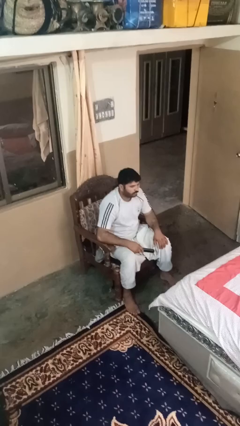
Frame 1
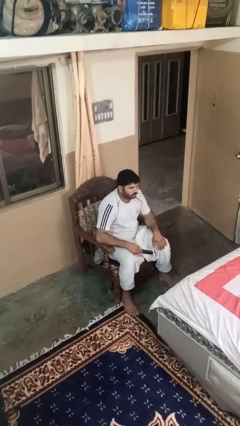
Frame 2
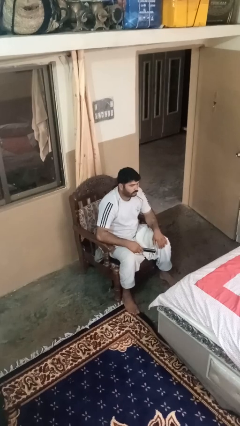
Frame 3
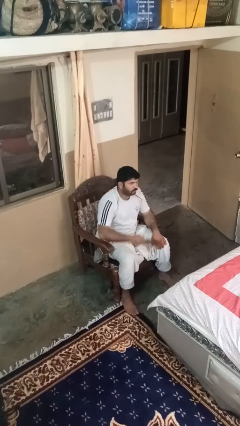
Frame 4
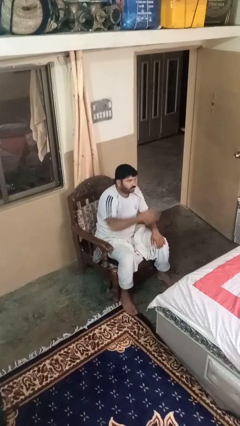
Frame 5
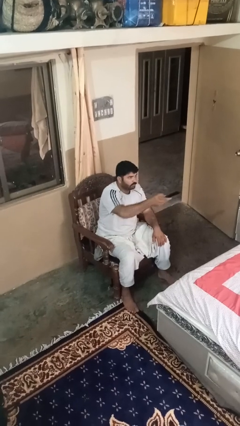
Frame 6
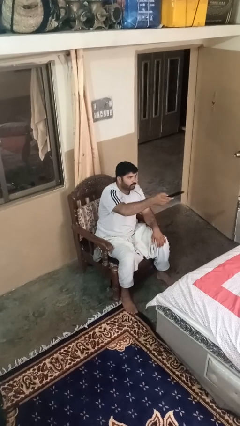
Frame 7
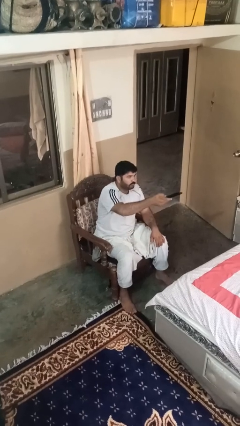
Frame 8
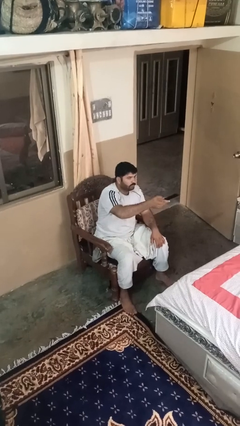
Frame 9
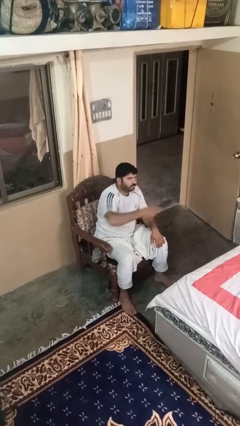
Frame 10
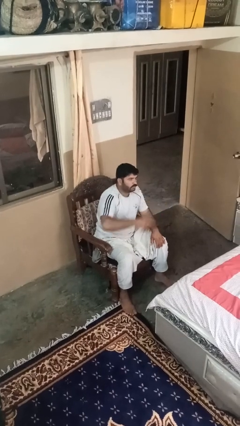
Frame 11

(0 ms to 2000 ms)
person uses television remote

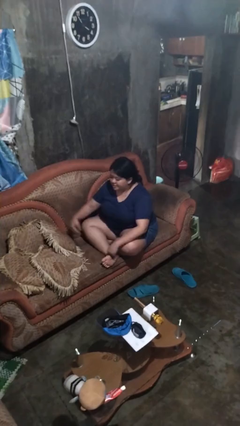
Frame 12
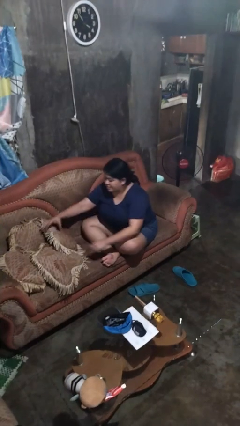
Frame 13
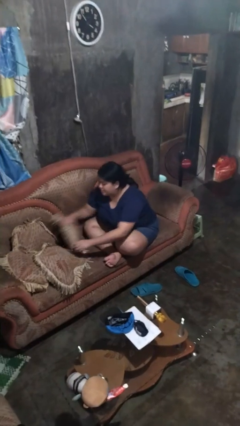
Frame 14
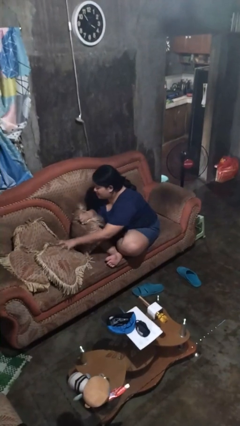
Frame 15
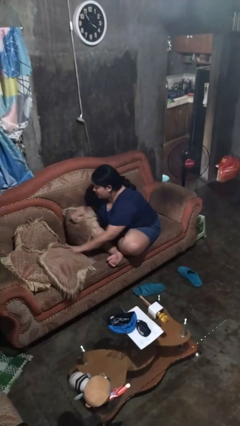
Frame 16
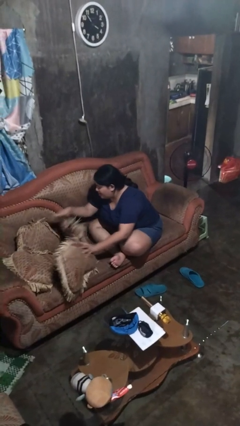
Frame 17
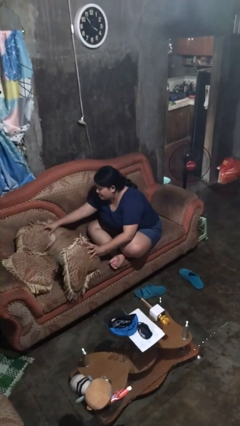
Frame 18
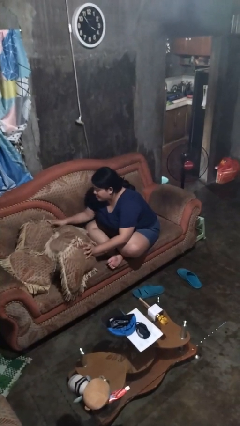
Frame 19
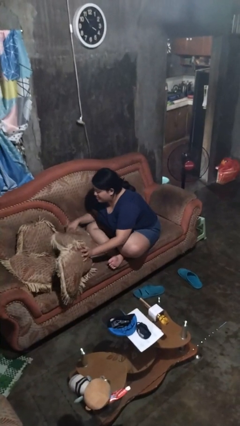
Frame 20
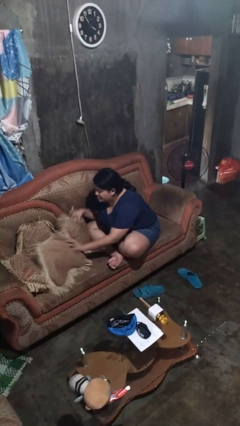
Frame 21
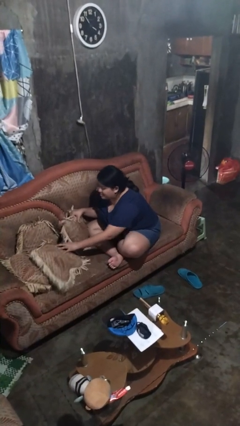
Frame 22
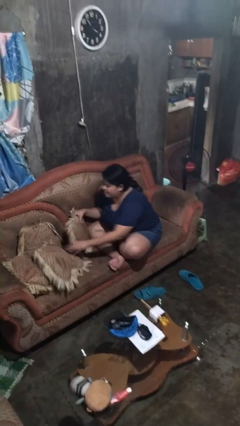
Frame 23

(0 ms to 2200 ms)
person searches in couch

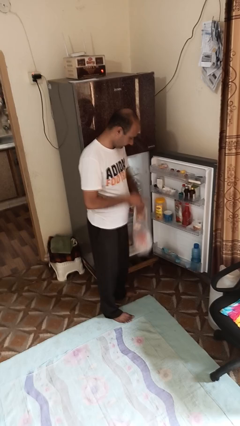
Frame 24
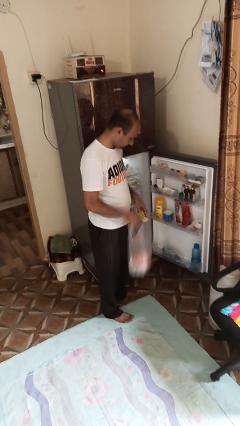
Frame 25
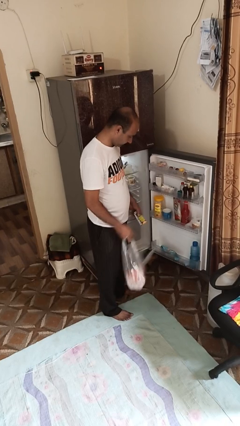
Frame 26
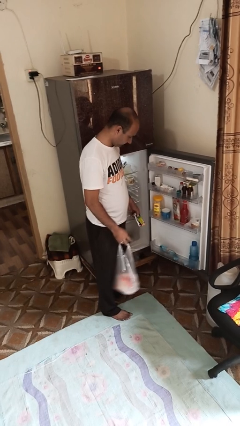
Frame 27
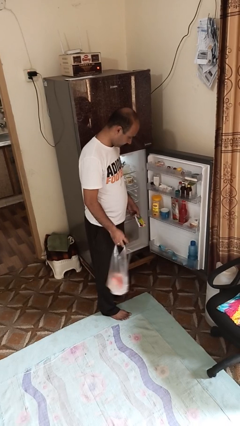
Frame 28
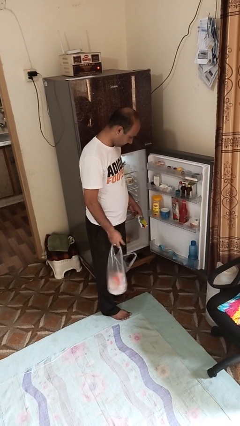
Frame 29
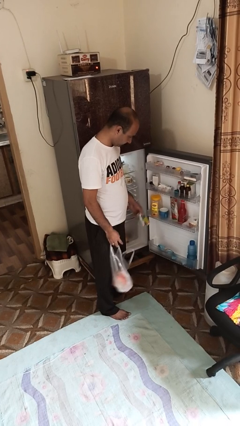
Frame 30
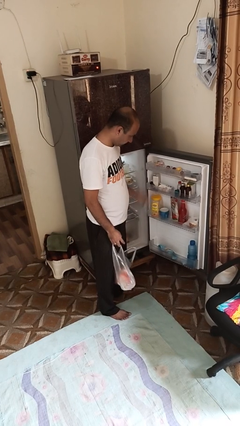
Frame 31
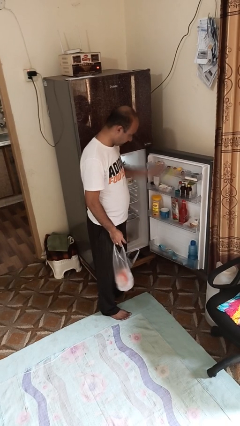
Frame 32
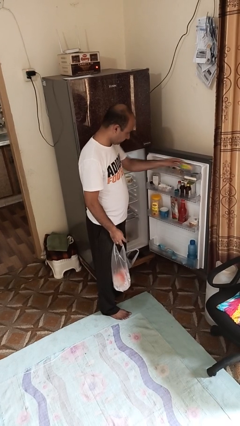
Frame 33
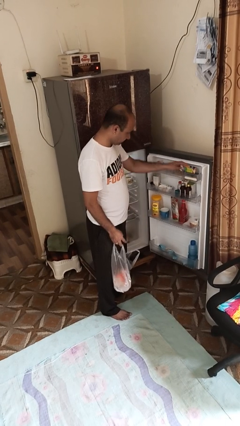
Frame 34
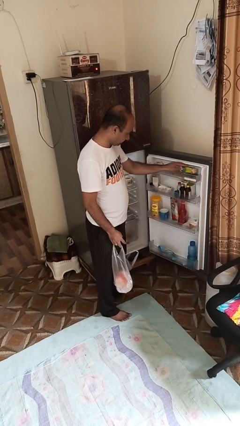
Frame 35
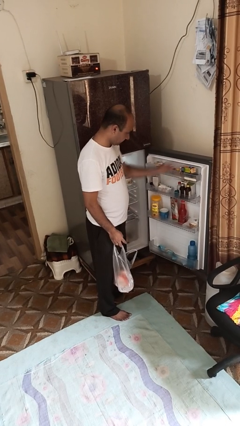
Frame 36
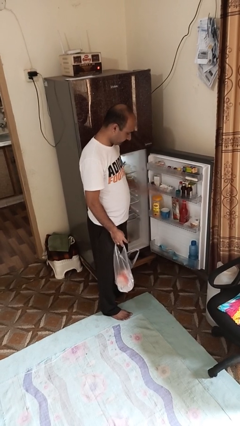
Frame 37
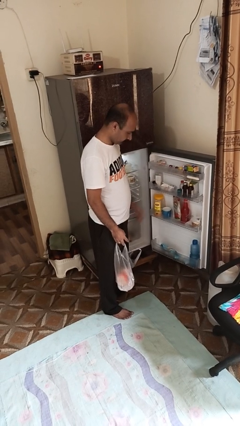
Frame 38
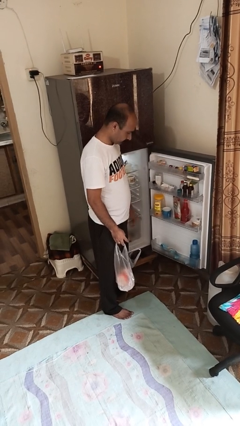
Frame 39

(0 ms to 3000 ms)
person loads groceries into refrigerator

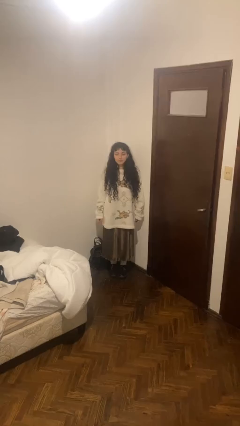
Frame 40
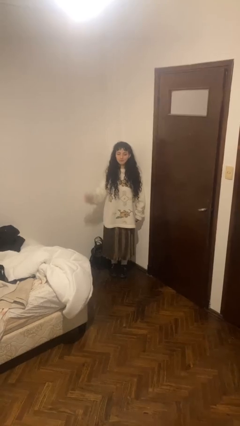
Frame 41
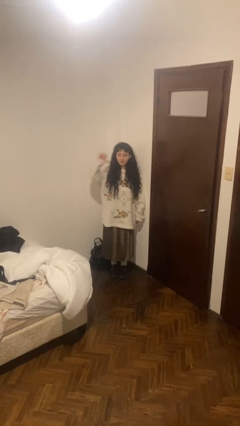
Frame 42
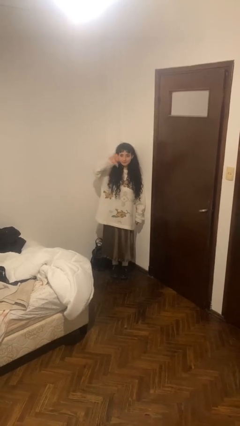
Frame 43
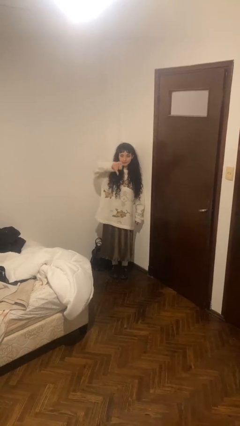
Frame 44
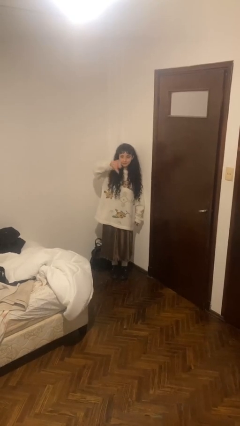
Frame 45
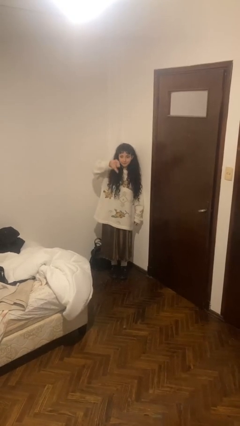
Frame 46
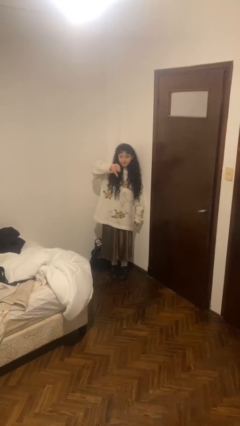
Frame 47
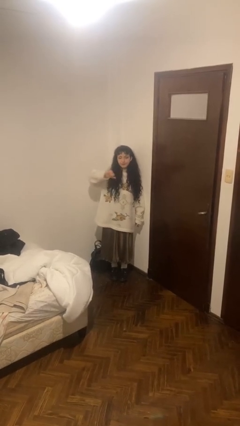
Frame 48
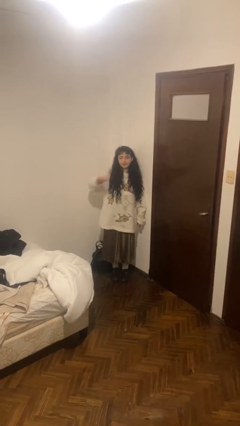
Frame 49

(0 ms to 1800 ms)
person gestures thumbs down

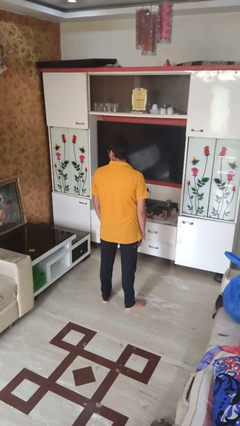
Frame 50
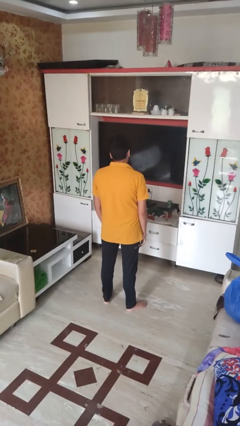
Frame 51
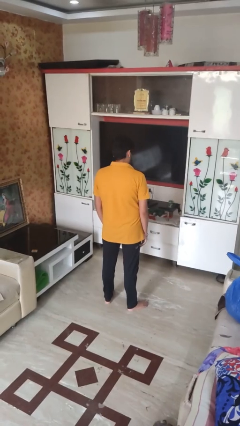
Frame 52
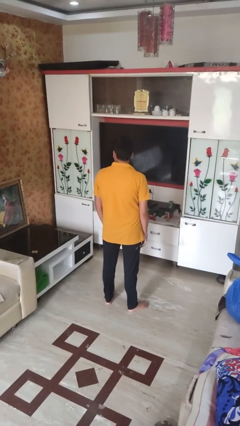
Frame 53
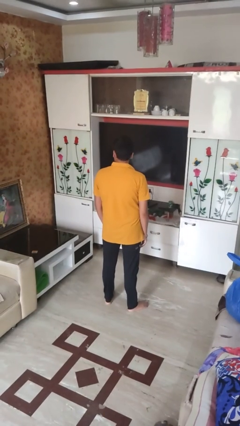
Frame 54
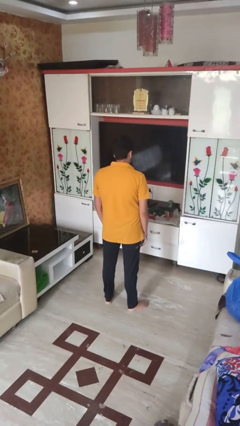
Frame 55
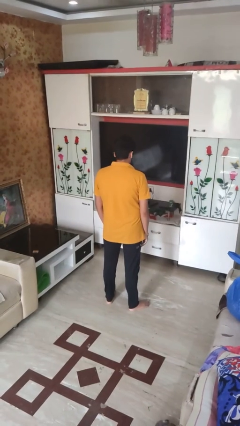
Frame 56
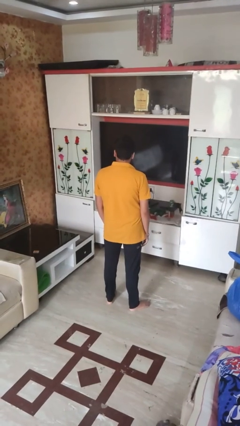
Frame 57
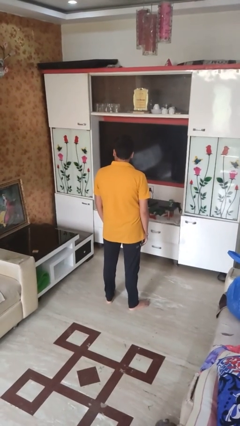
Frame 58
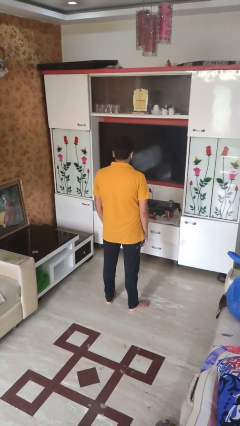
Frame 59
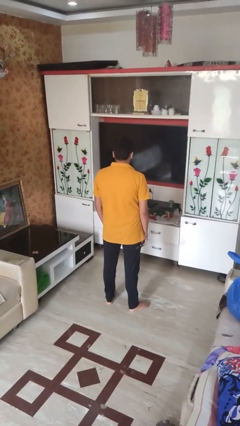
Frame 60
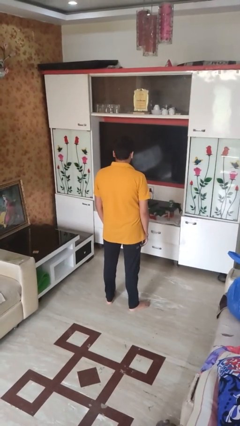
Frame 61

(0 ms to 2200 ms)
person shakes head

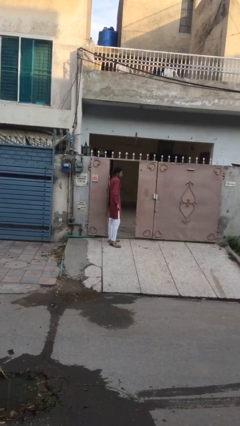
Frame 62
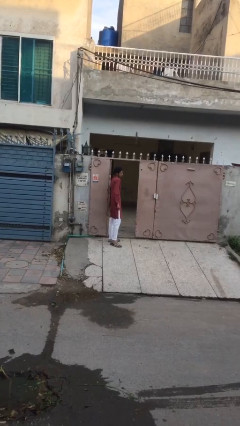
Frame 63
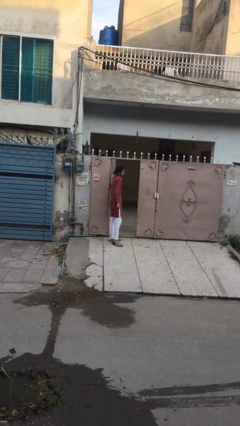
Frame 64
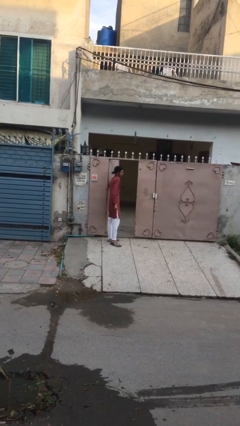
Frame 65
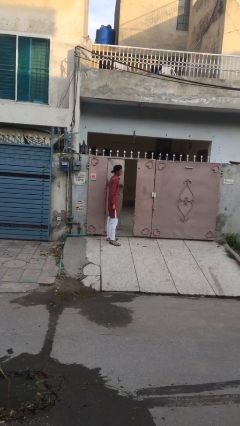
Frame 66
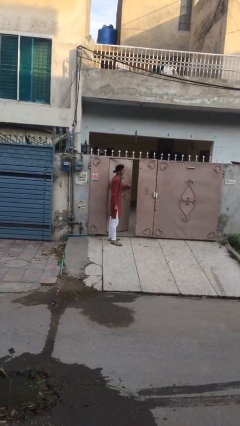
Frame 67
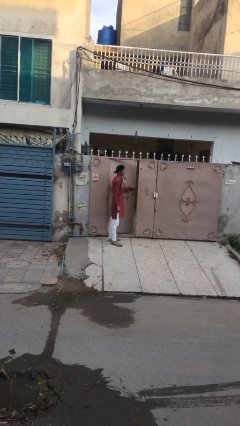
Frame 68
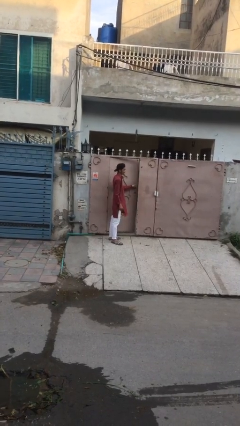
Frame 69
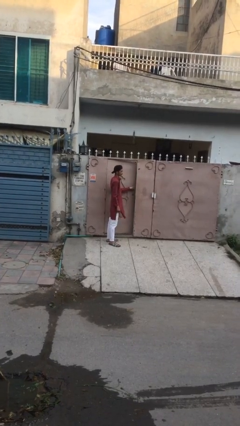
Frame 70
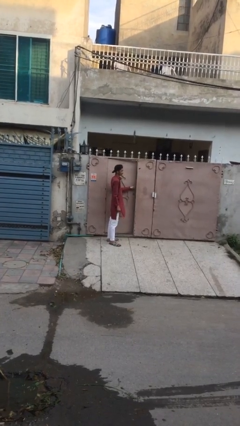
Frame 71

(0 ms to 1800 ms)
person closes facility door

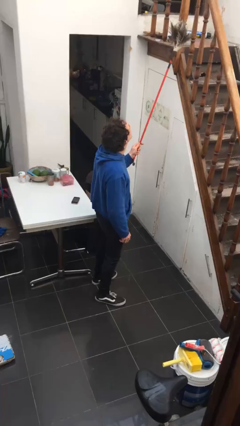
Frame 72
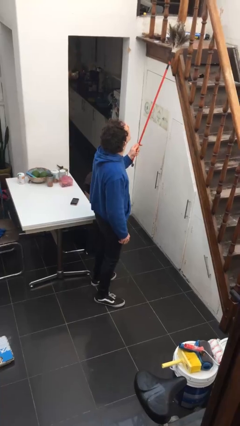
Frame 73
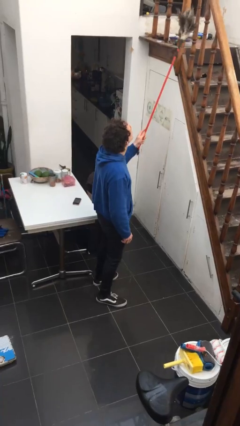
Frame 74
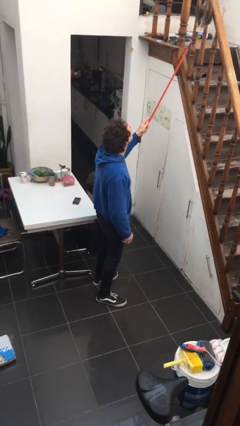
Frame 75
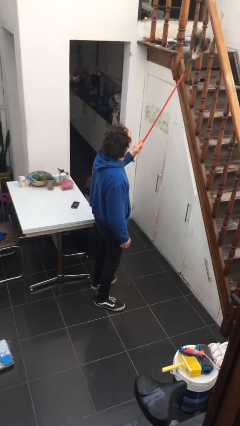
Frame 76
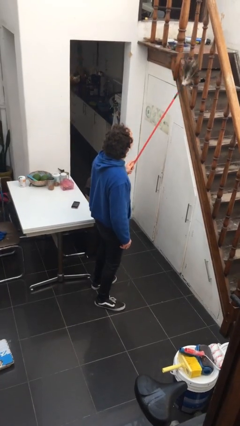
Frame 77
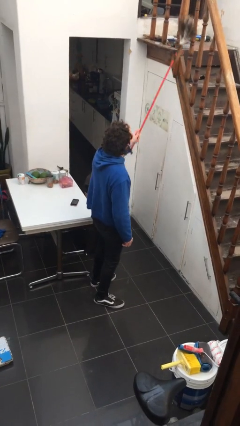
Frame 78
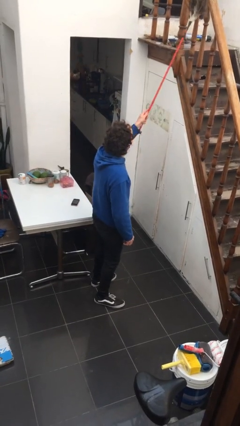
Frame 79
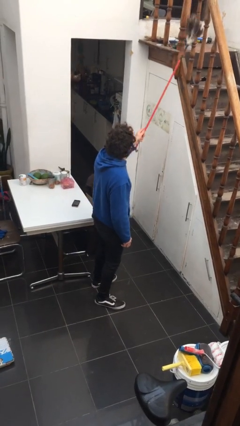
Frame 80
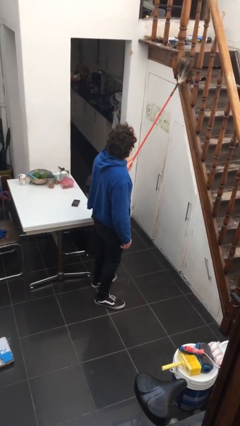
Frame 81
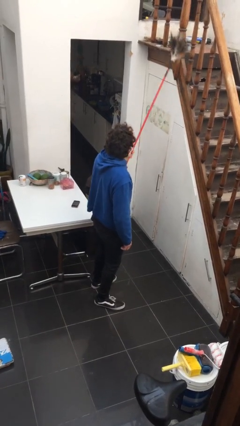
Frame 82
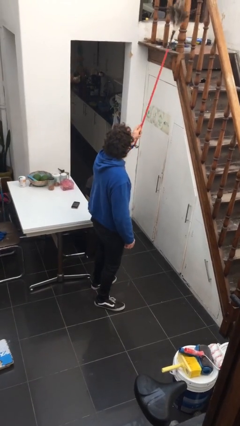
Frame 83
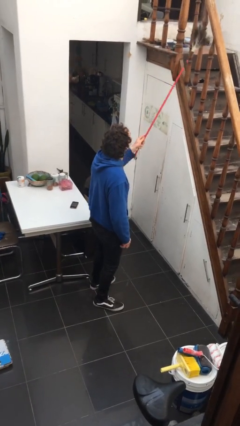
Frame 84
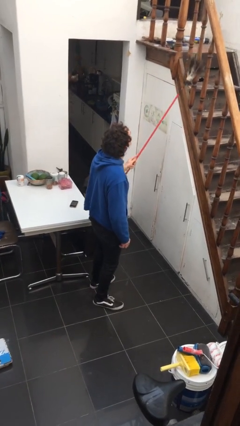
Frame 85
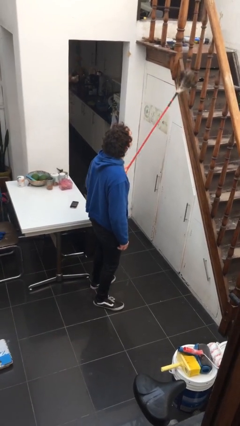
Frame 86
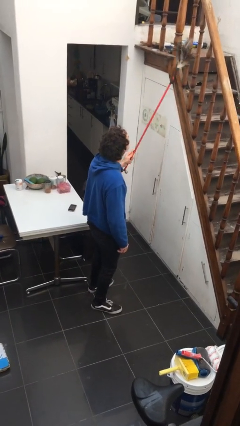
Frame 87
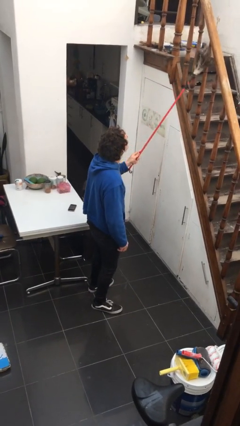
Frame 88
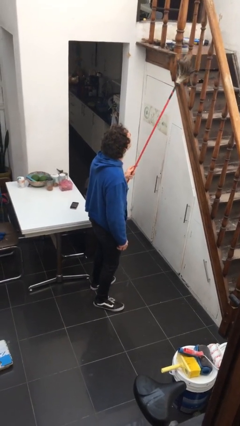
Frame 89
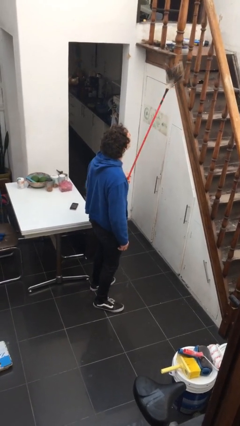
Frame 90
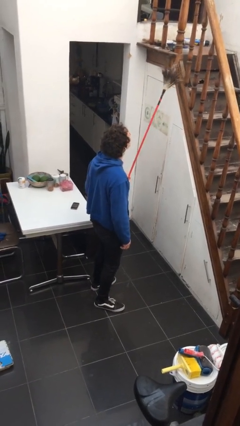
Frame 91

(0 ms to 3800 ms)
person dusts furniture
